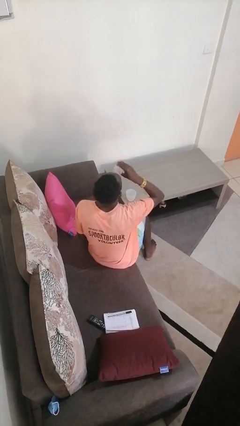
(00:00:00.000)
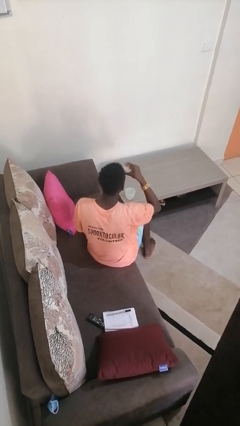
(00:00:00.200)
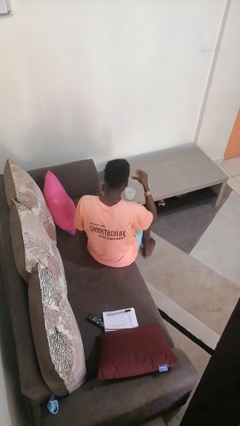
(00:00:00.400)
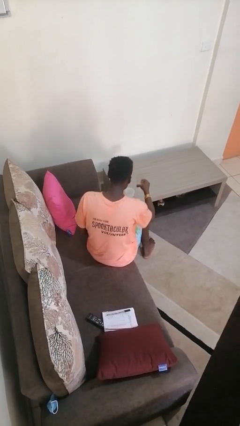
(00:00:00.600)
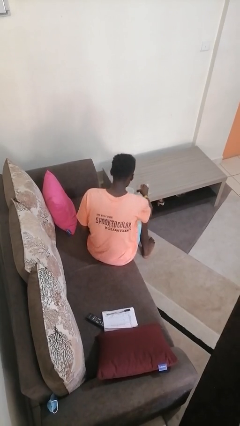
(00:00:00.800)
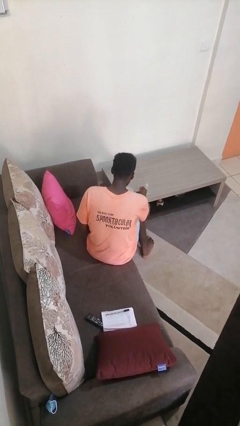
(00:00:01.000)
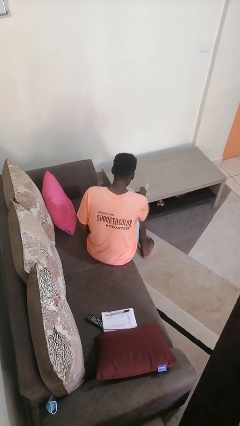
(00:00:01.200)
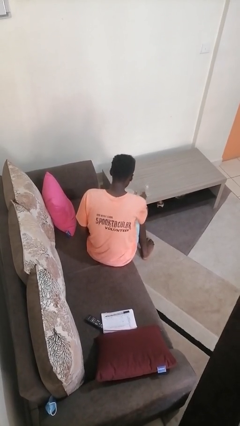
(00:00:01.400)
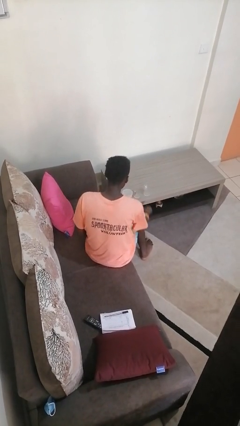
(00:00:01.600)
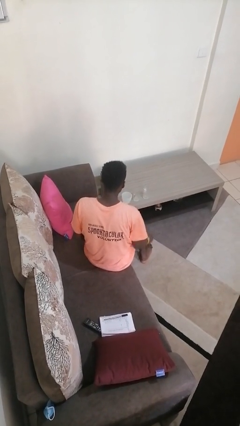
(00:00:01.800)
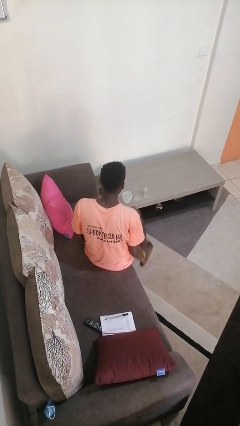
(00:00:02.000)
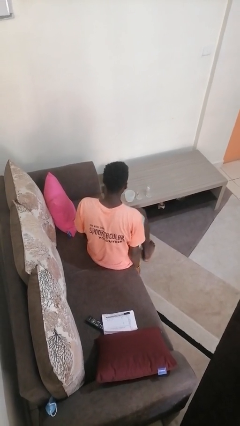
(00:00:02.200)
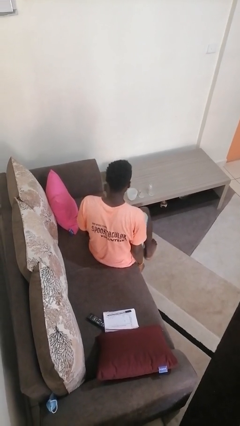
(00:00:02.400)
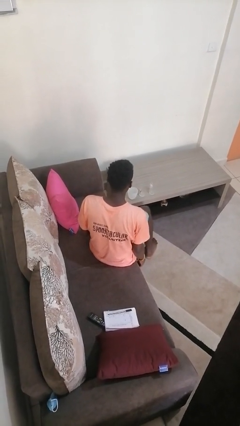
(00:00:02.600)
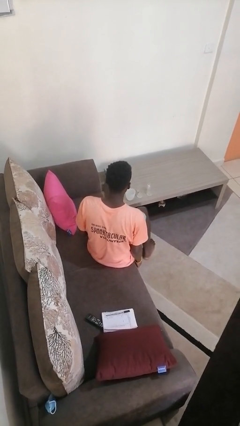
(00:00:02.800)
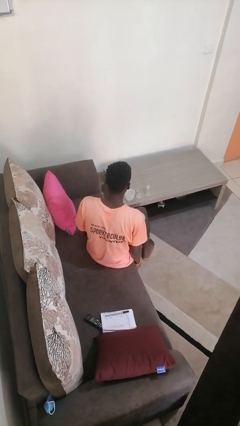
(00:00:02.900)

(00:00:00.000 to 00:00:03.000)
person puts down object on table

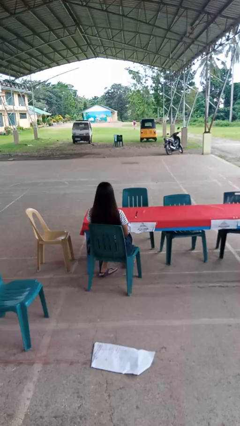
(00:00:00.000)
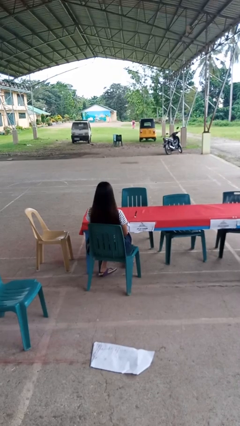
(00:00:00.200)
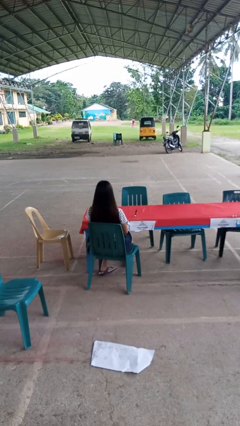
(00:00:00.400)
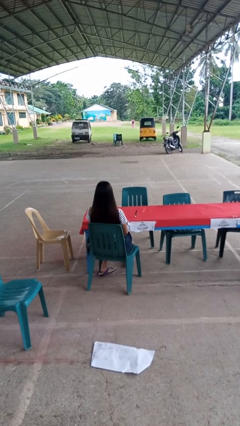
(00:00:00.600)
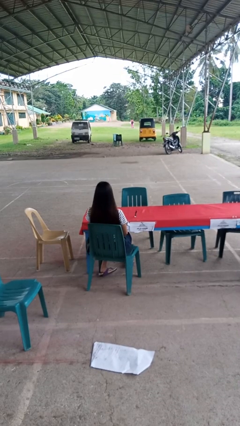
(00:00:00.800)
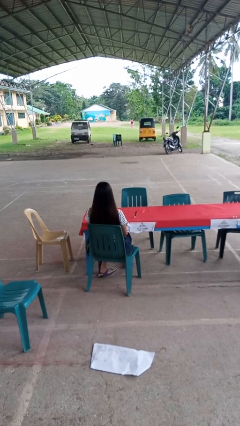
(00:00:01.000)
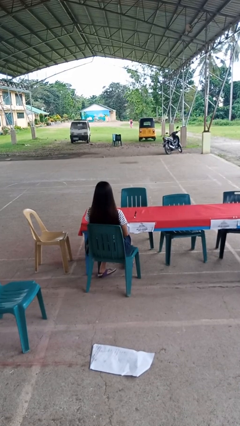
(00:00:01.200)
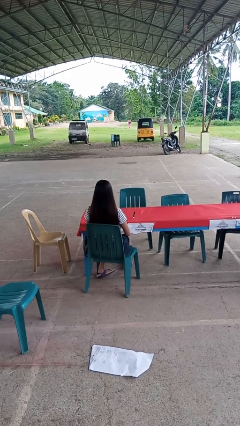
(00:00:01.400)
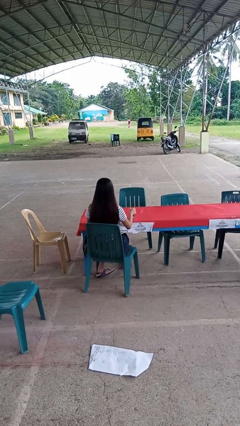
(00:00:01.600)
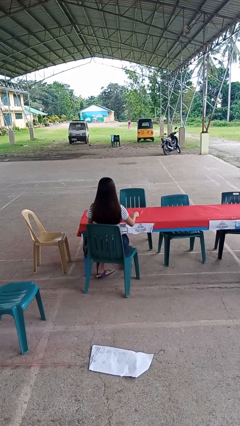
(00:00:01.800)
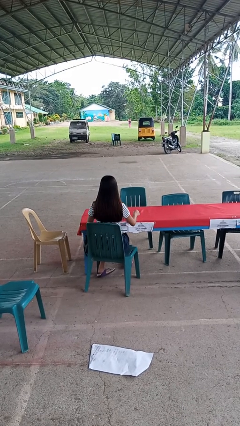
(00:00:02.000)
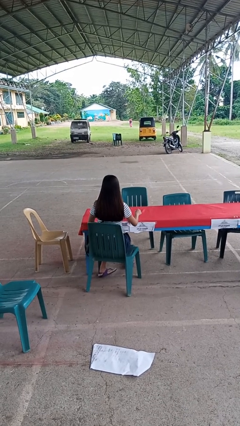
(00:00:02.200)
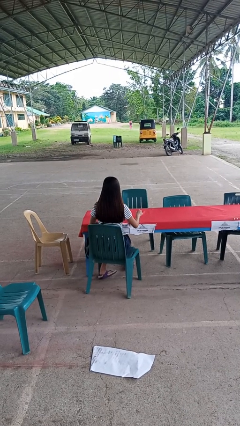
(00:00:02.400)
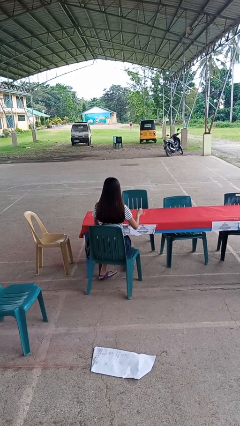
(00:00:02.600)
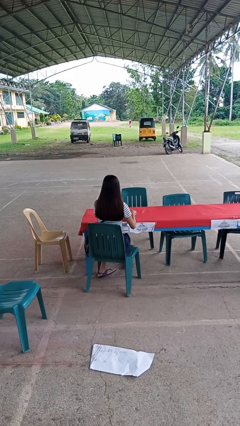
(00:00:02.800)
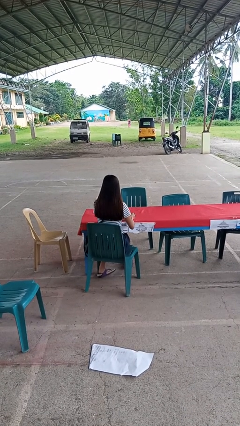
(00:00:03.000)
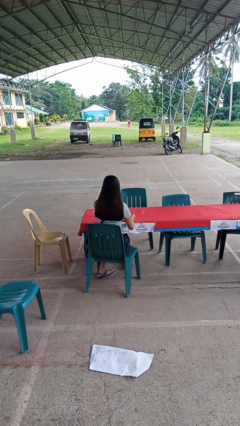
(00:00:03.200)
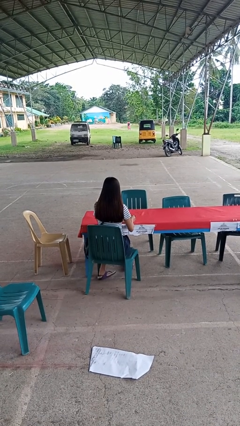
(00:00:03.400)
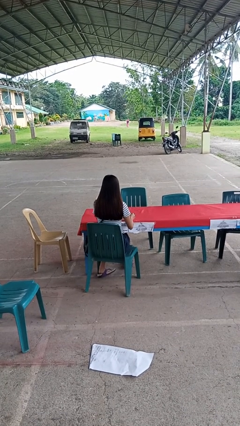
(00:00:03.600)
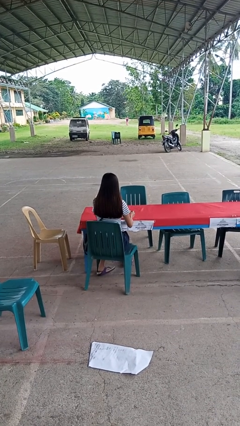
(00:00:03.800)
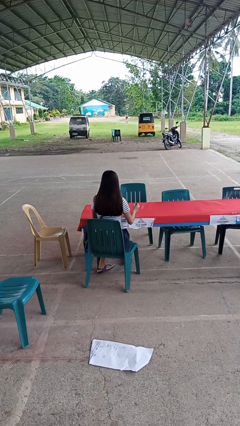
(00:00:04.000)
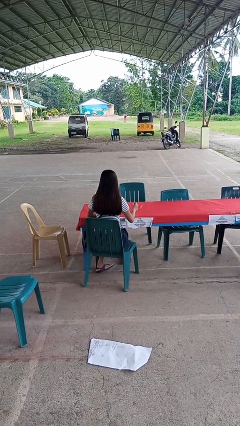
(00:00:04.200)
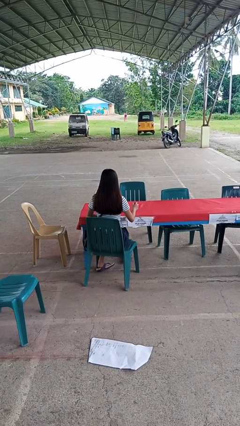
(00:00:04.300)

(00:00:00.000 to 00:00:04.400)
person paints fingernails

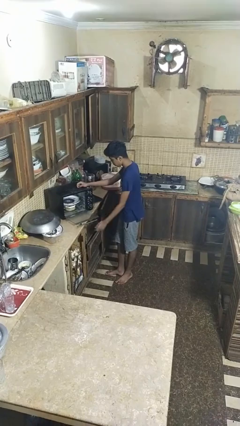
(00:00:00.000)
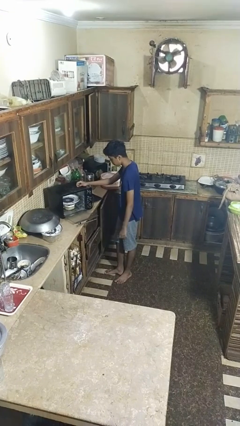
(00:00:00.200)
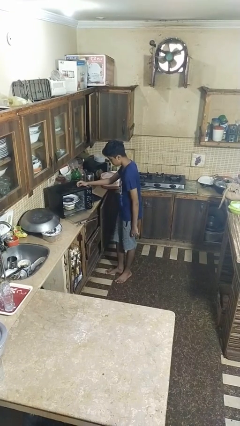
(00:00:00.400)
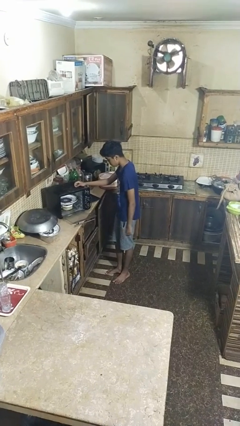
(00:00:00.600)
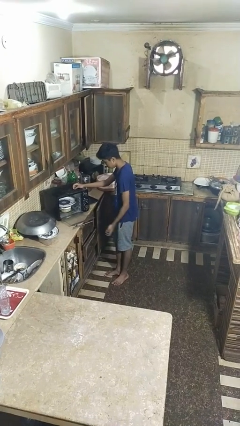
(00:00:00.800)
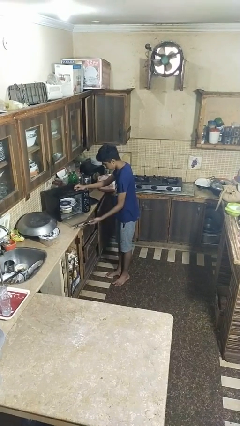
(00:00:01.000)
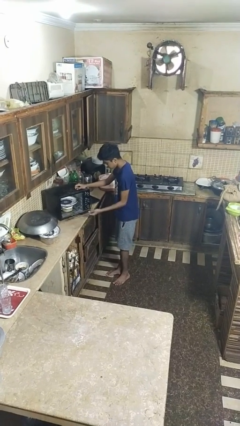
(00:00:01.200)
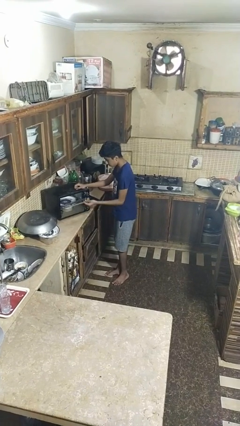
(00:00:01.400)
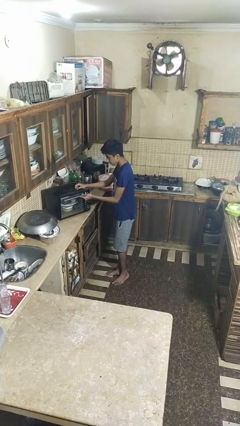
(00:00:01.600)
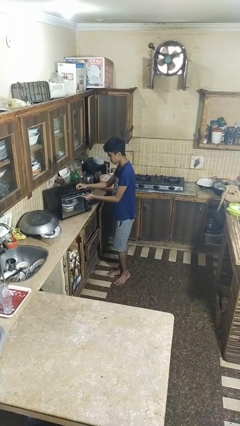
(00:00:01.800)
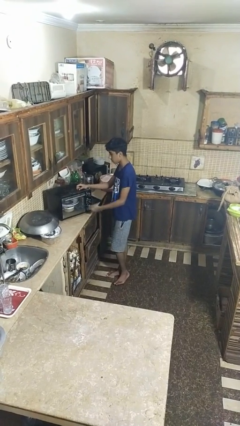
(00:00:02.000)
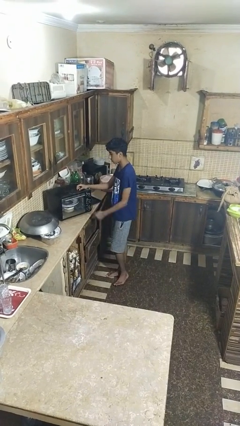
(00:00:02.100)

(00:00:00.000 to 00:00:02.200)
person closes dishwasher

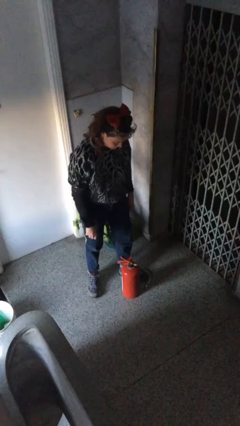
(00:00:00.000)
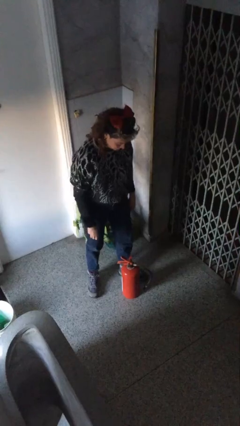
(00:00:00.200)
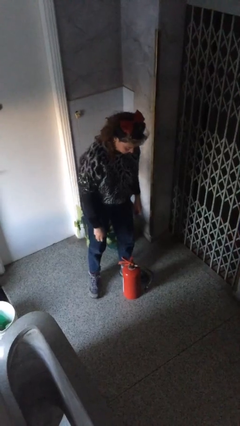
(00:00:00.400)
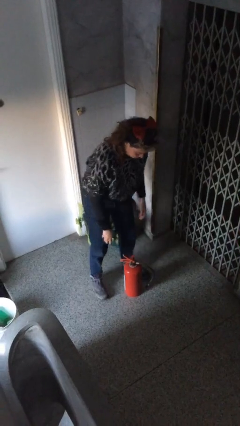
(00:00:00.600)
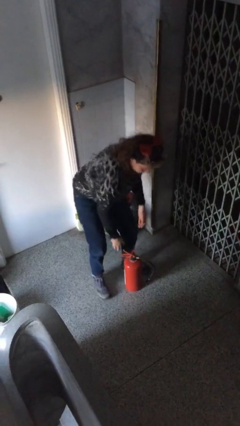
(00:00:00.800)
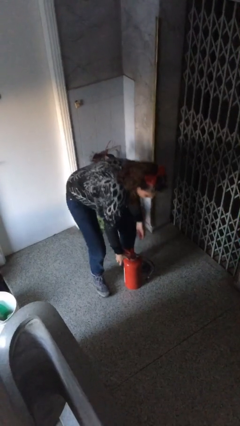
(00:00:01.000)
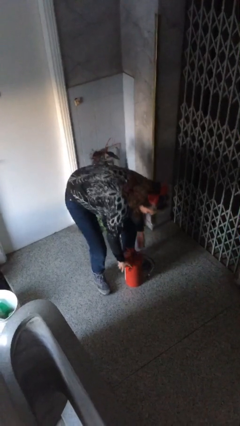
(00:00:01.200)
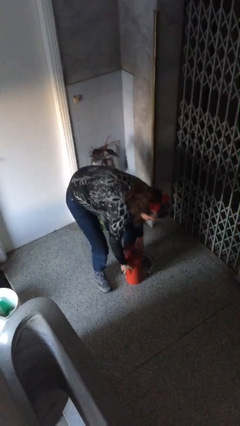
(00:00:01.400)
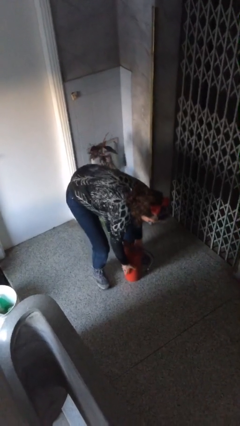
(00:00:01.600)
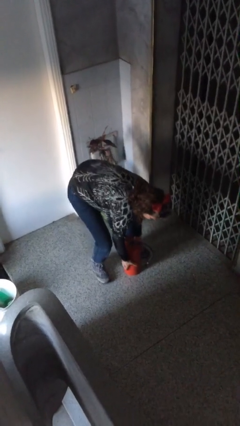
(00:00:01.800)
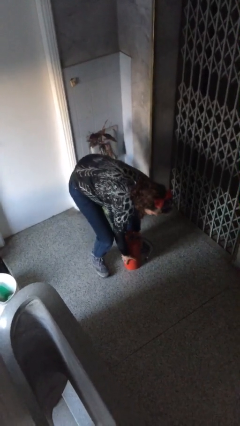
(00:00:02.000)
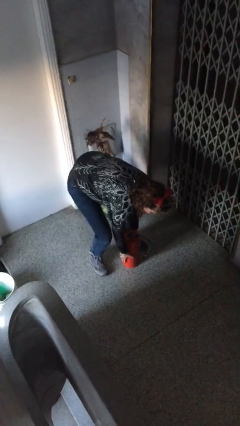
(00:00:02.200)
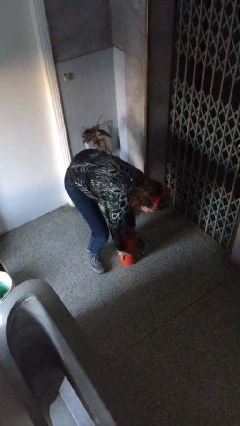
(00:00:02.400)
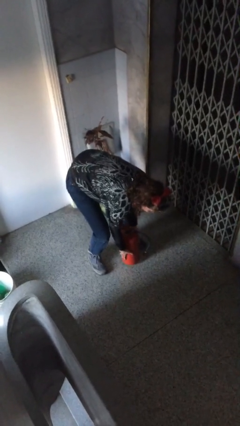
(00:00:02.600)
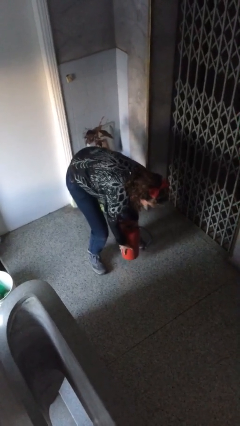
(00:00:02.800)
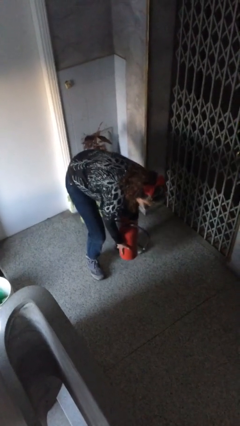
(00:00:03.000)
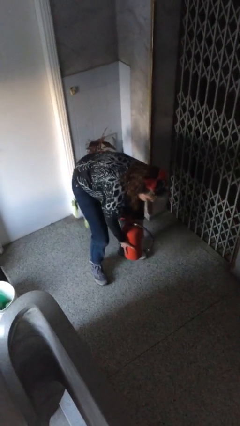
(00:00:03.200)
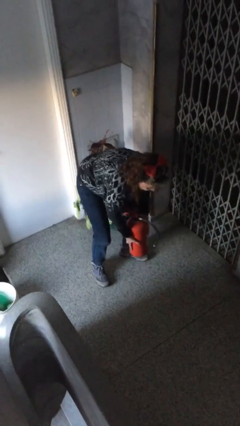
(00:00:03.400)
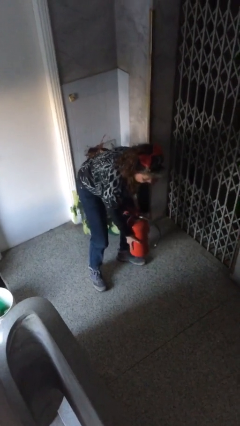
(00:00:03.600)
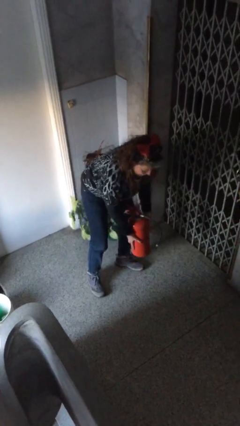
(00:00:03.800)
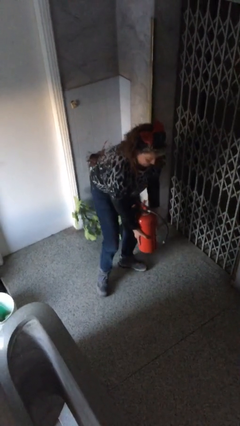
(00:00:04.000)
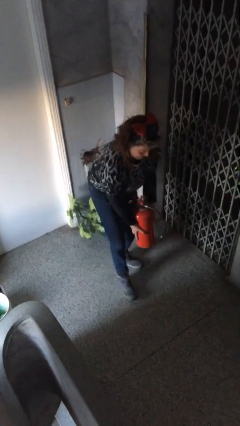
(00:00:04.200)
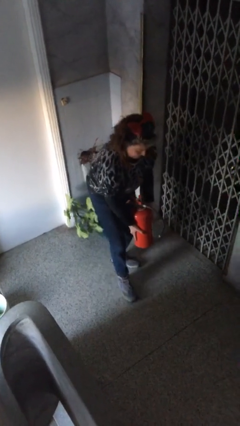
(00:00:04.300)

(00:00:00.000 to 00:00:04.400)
person picks up object from floor

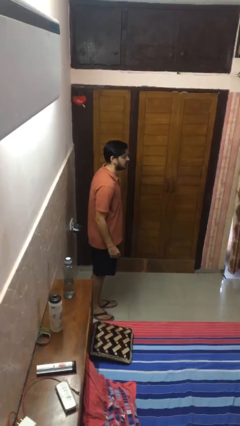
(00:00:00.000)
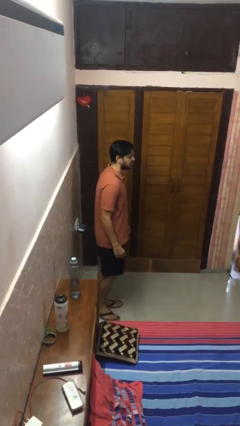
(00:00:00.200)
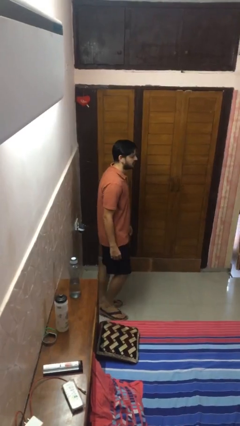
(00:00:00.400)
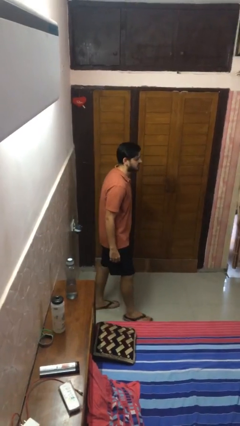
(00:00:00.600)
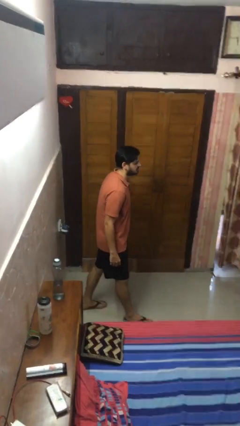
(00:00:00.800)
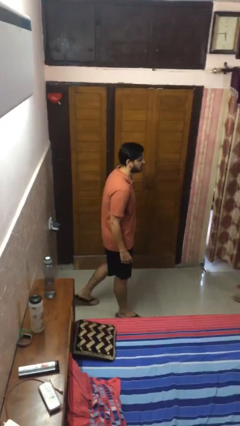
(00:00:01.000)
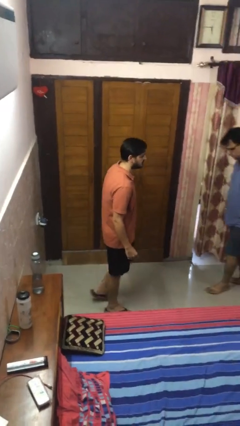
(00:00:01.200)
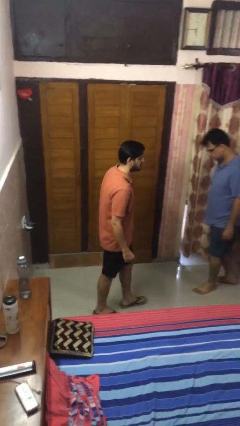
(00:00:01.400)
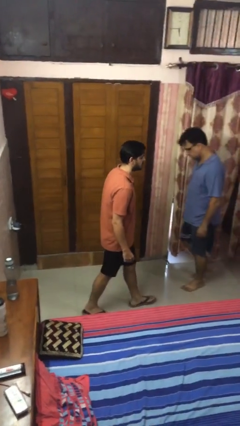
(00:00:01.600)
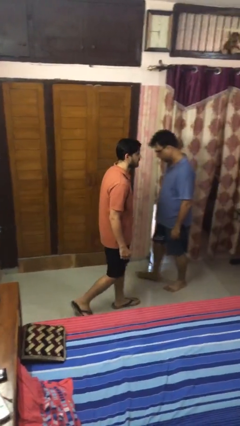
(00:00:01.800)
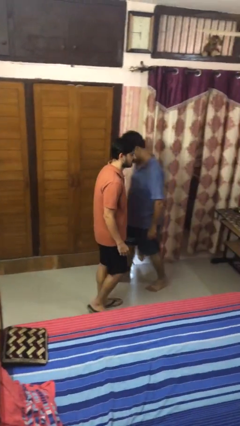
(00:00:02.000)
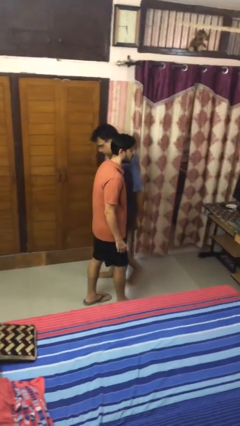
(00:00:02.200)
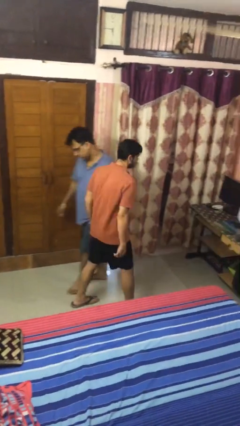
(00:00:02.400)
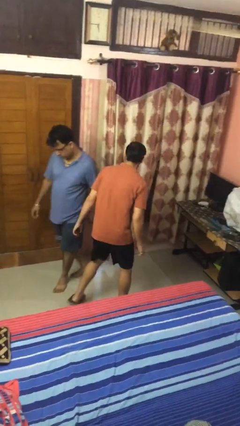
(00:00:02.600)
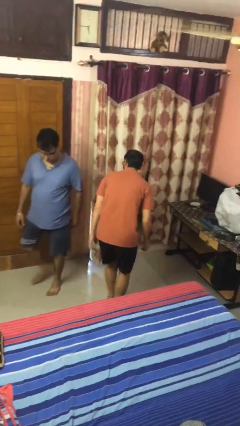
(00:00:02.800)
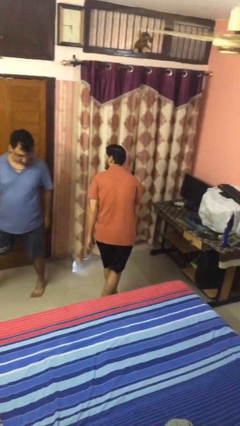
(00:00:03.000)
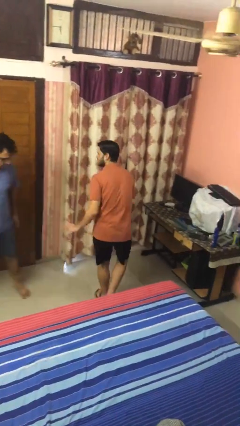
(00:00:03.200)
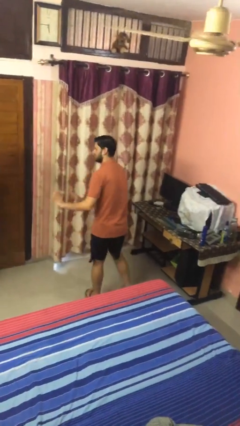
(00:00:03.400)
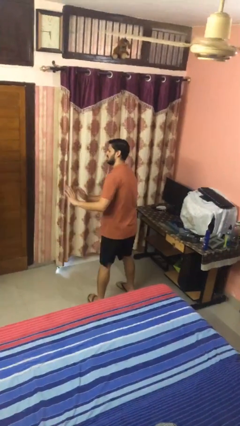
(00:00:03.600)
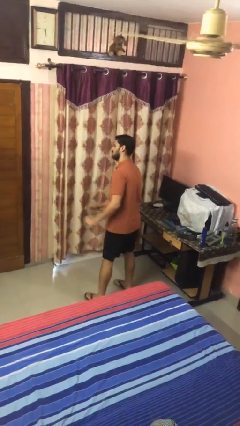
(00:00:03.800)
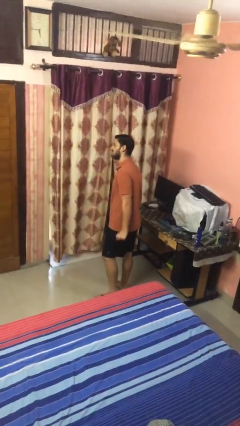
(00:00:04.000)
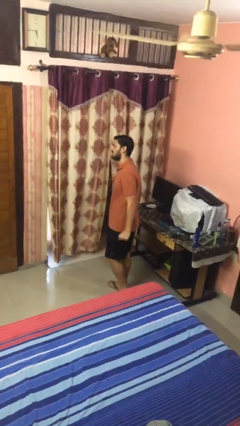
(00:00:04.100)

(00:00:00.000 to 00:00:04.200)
person bumps into person
